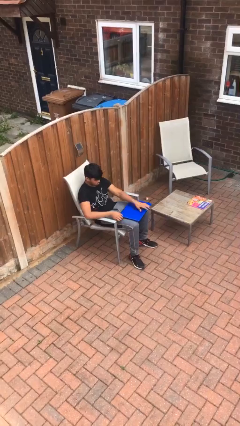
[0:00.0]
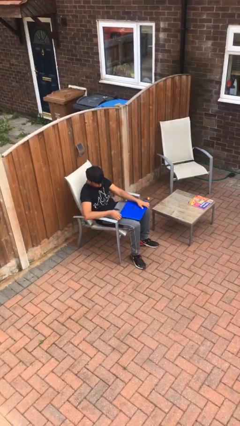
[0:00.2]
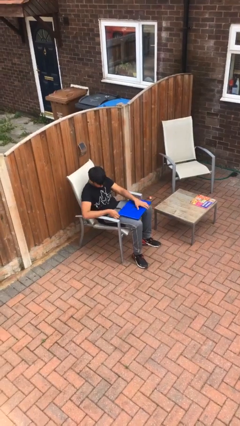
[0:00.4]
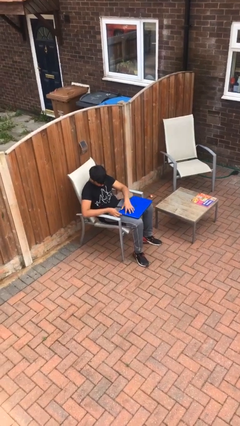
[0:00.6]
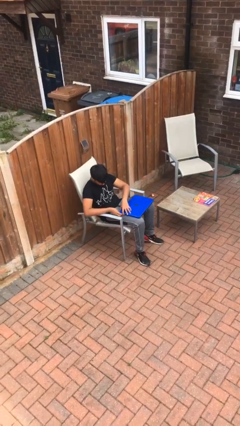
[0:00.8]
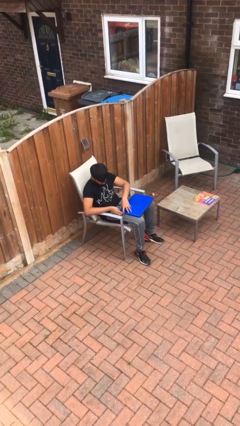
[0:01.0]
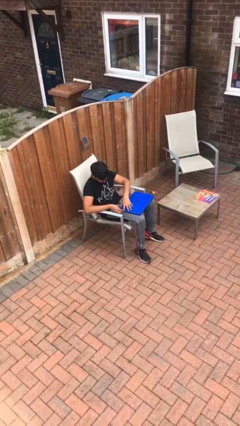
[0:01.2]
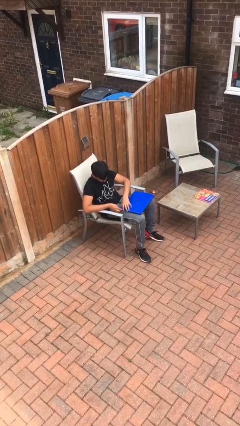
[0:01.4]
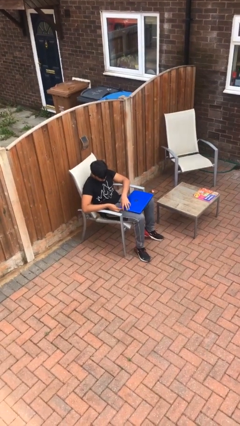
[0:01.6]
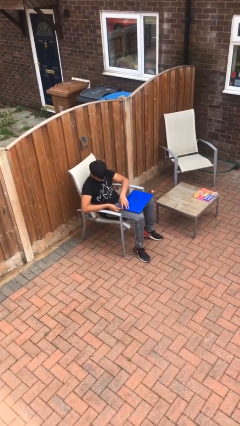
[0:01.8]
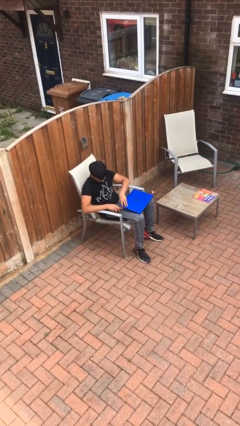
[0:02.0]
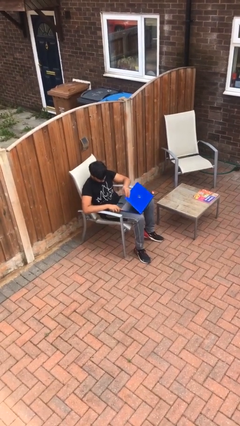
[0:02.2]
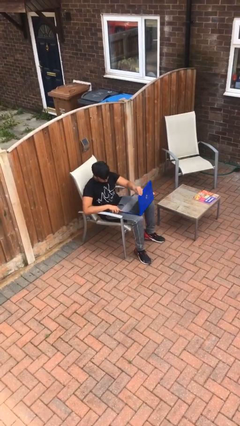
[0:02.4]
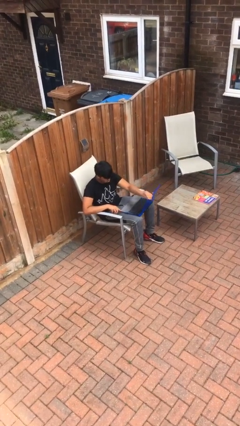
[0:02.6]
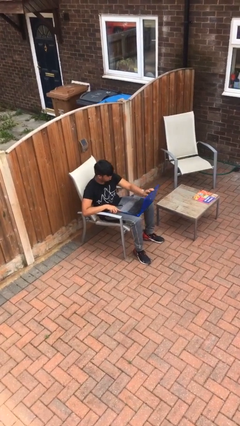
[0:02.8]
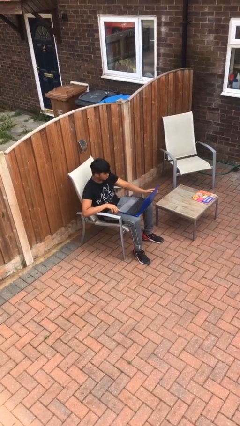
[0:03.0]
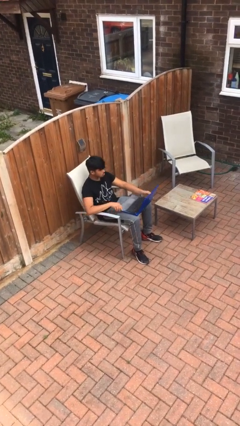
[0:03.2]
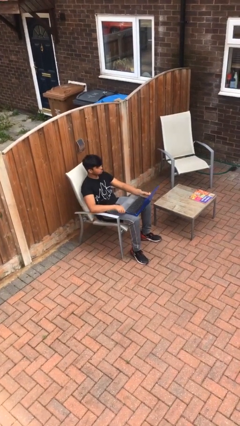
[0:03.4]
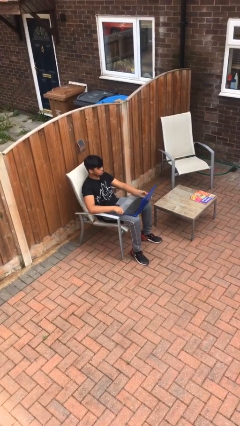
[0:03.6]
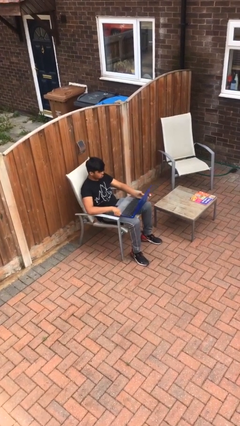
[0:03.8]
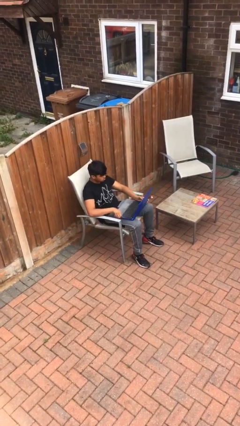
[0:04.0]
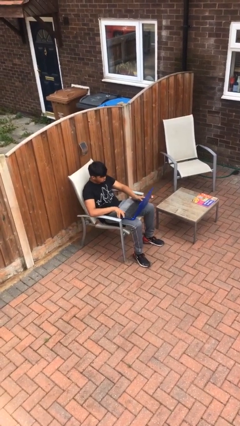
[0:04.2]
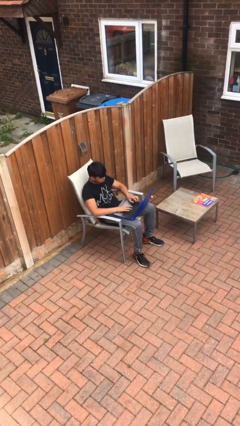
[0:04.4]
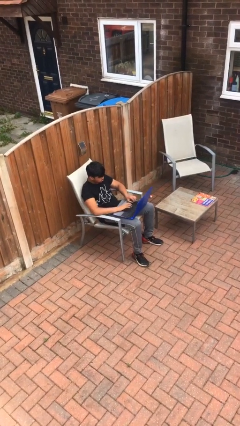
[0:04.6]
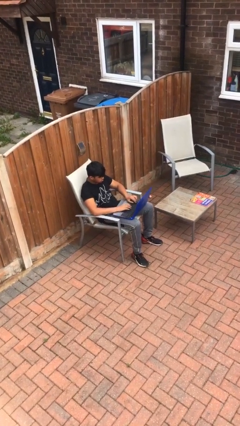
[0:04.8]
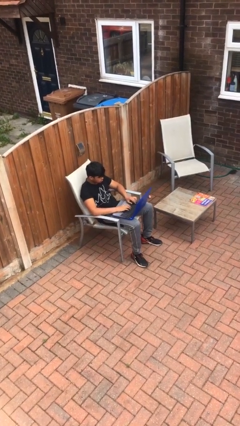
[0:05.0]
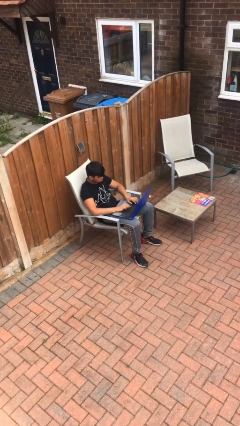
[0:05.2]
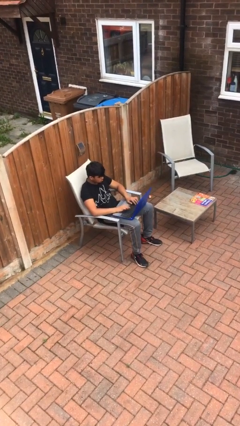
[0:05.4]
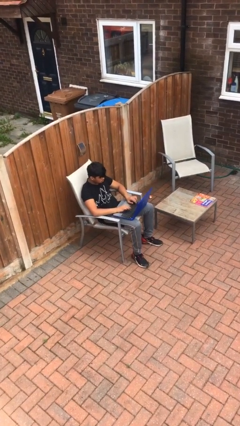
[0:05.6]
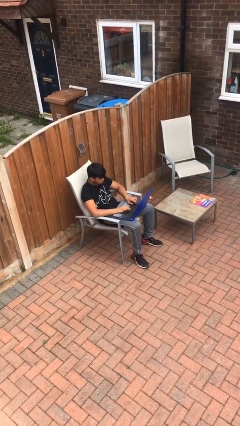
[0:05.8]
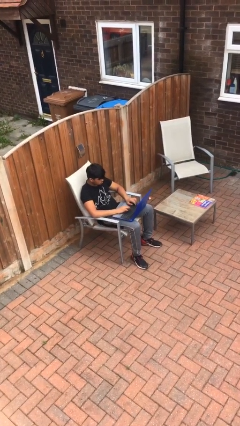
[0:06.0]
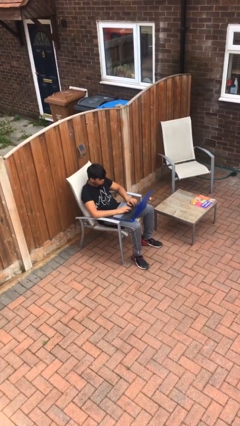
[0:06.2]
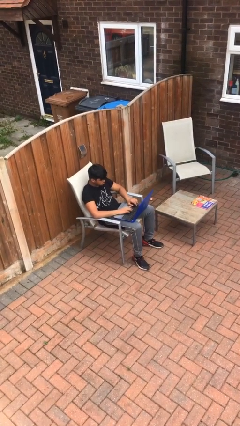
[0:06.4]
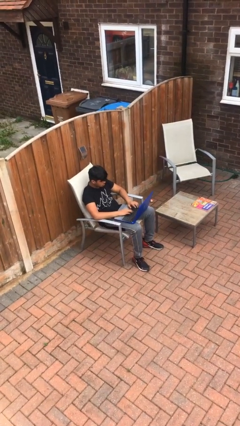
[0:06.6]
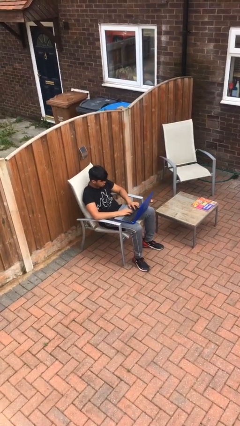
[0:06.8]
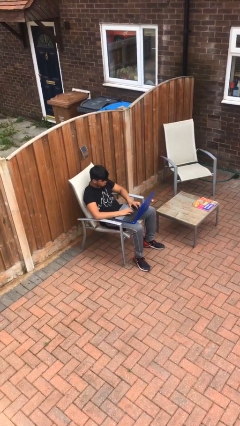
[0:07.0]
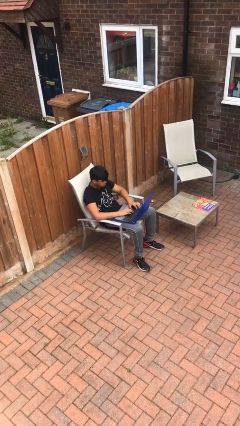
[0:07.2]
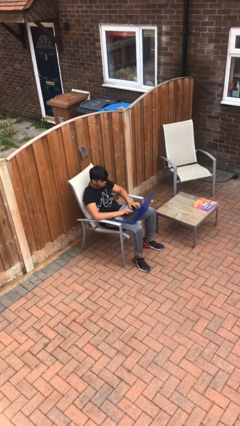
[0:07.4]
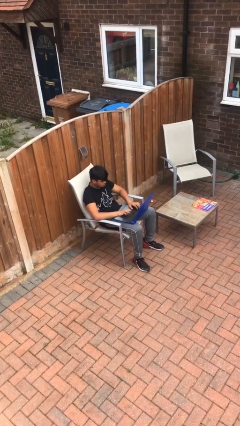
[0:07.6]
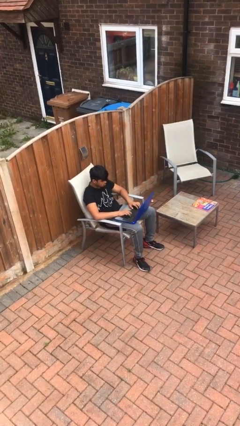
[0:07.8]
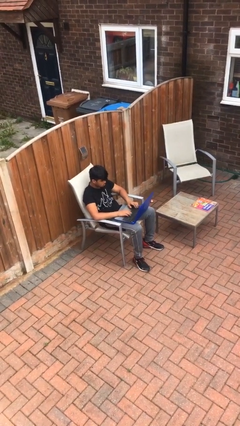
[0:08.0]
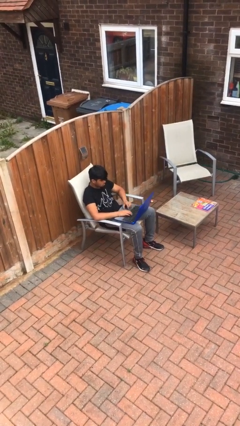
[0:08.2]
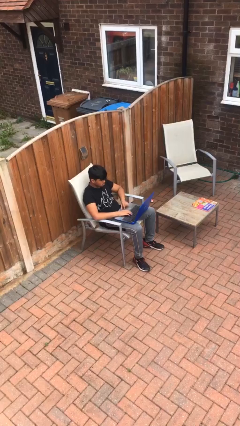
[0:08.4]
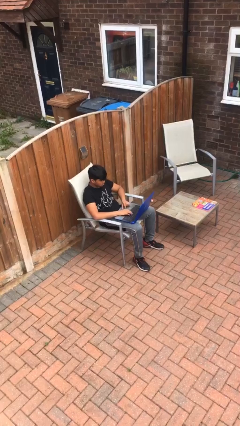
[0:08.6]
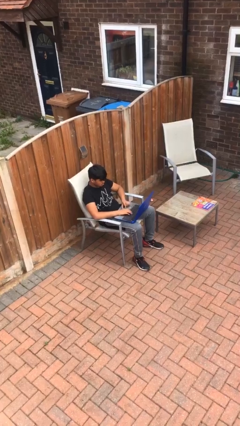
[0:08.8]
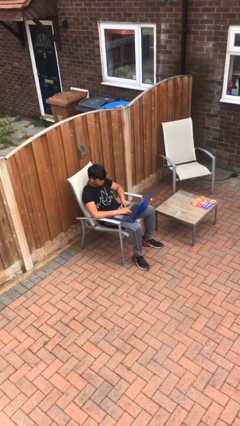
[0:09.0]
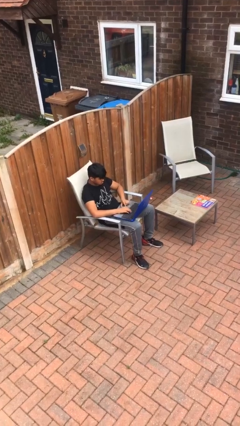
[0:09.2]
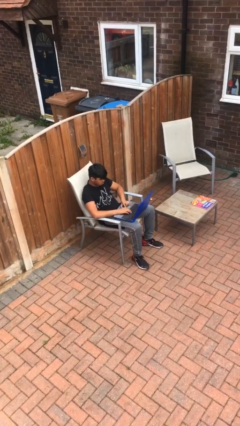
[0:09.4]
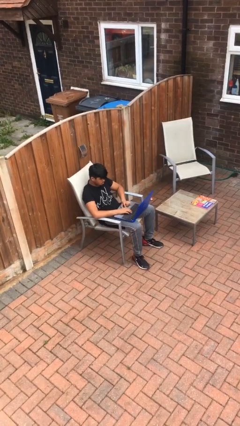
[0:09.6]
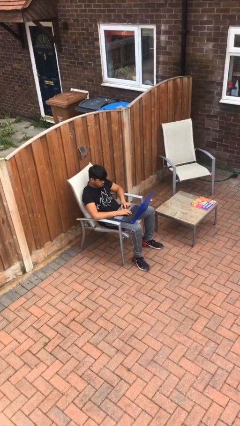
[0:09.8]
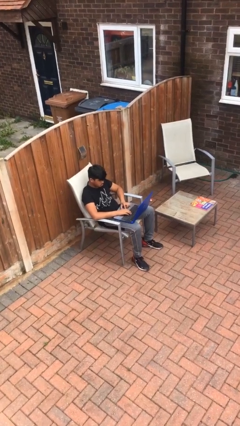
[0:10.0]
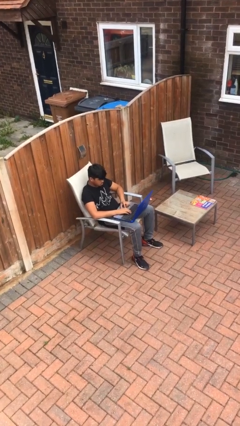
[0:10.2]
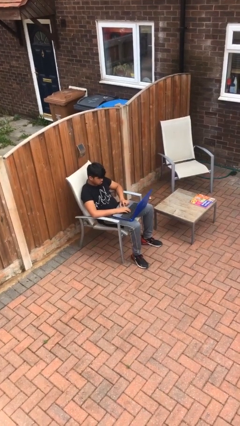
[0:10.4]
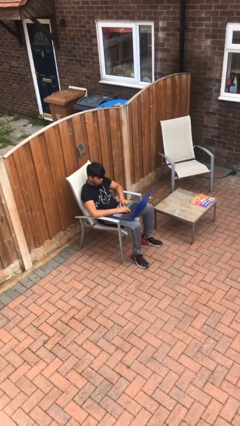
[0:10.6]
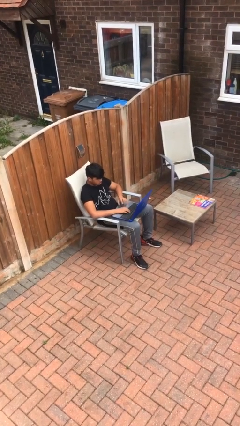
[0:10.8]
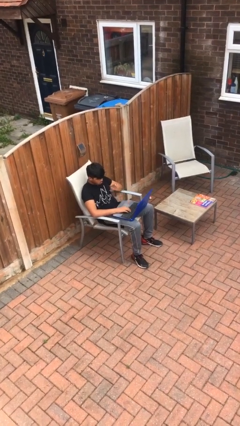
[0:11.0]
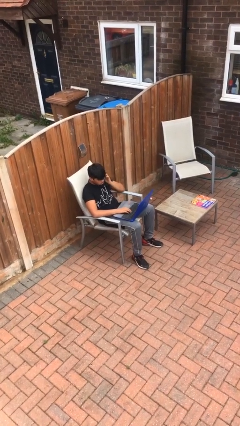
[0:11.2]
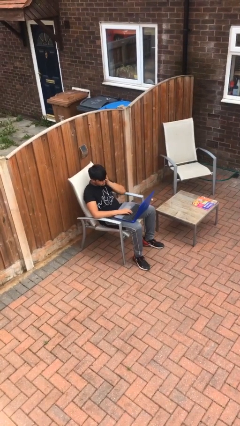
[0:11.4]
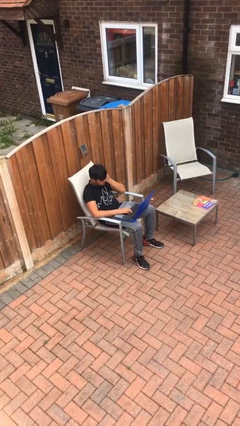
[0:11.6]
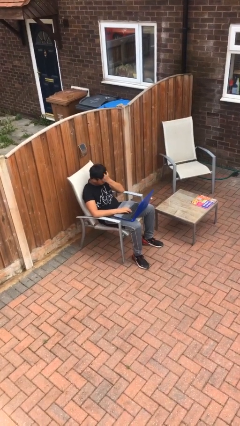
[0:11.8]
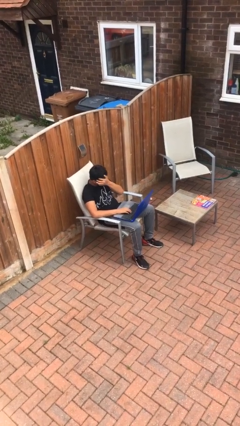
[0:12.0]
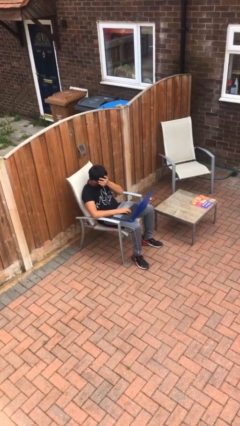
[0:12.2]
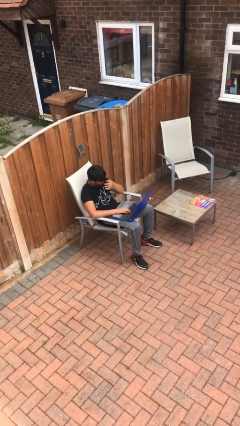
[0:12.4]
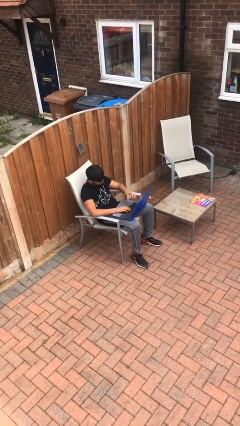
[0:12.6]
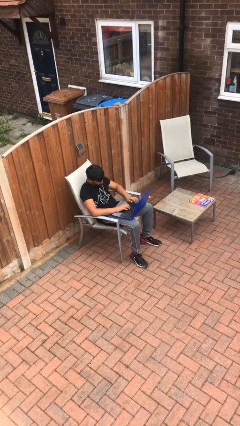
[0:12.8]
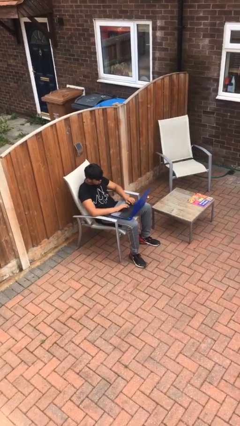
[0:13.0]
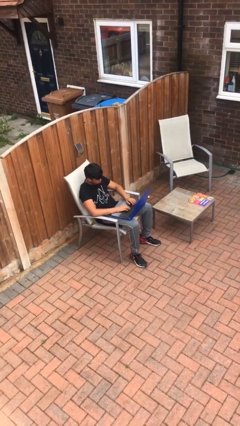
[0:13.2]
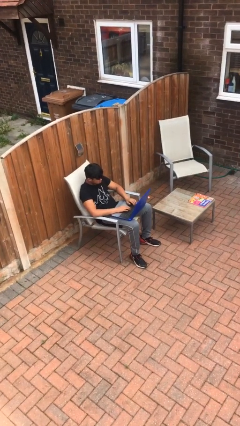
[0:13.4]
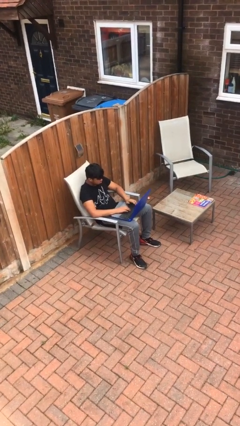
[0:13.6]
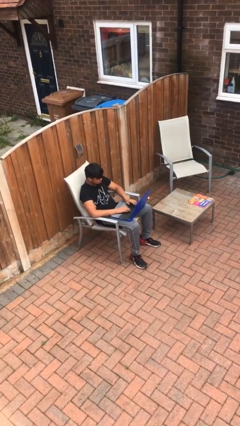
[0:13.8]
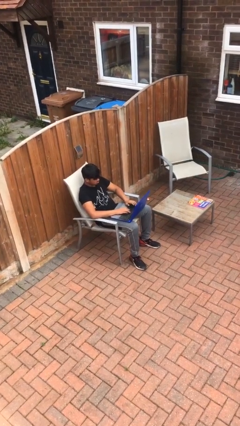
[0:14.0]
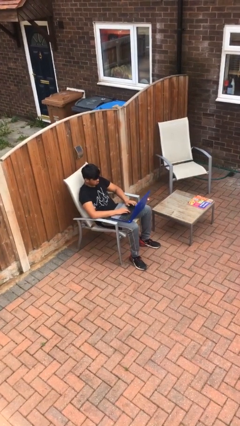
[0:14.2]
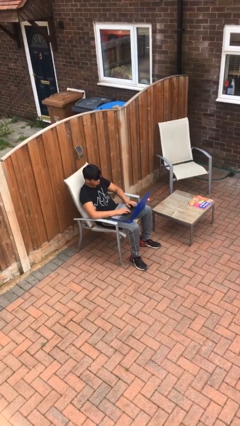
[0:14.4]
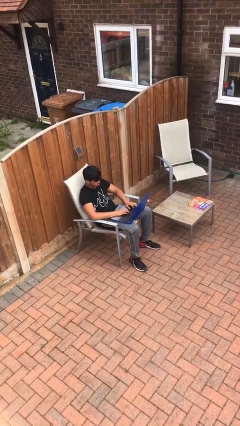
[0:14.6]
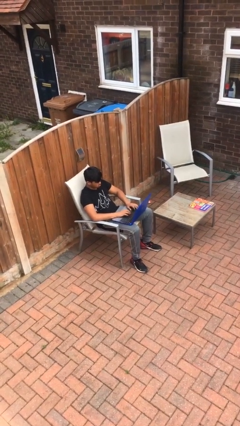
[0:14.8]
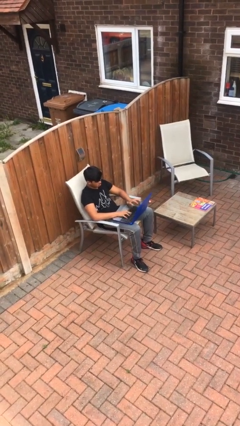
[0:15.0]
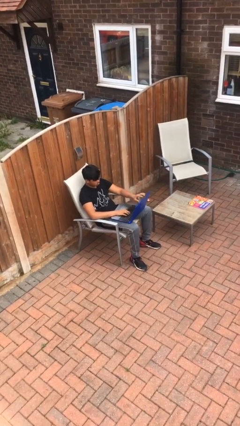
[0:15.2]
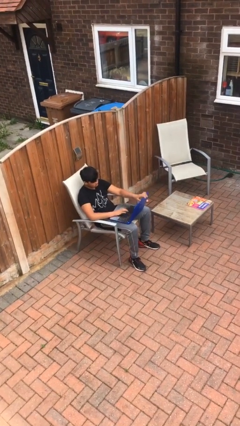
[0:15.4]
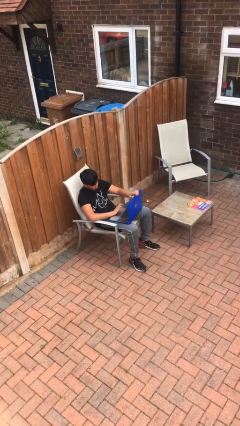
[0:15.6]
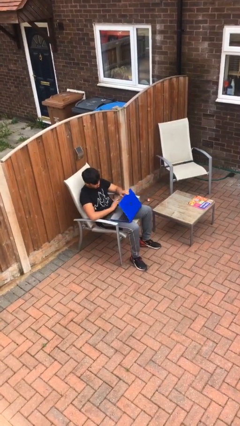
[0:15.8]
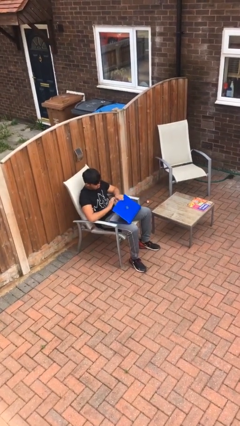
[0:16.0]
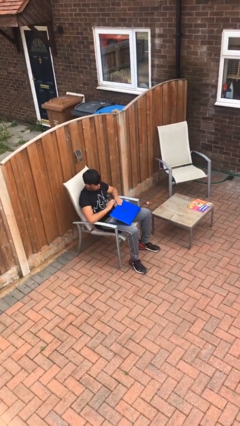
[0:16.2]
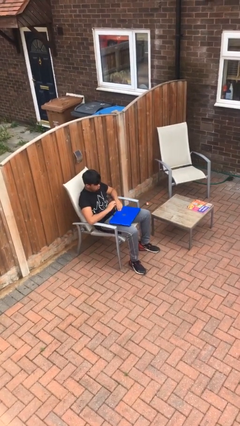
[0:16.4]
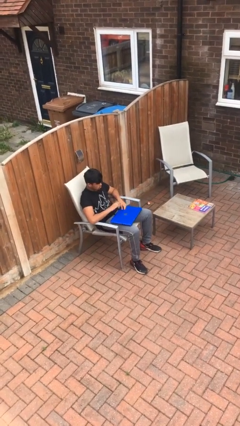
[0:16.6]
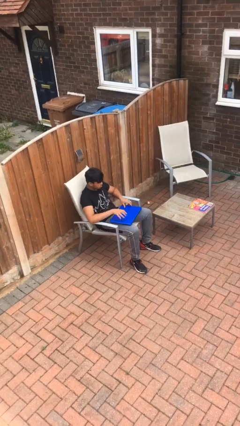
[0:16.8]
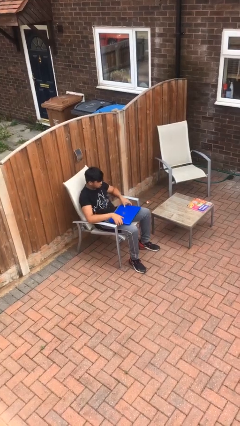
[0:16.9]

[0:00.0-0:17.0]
person interacts with laptop

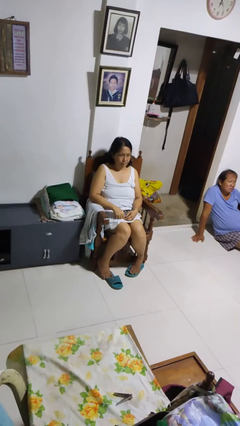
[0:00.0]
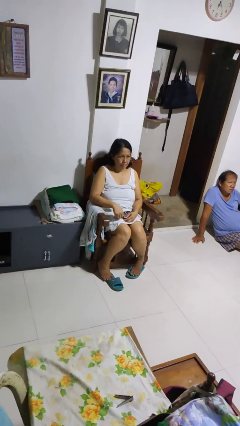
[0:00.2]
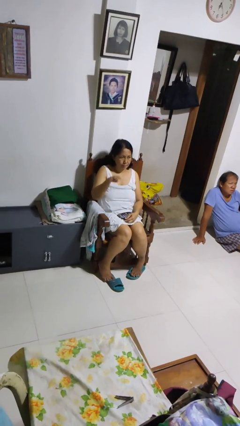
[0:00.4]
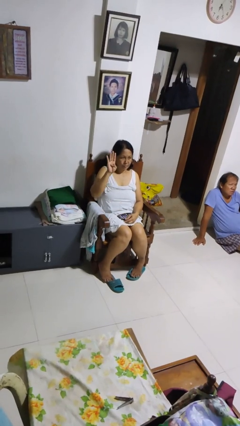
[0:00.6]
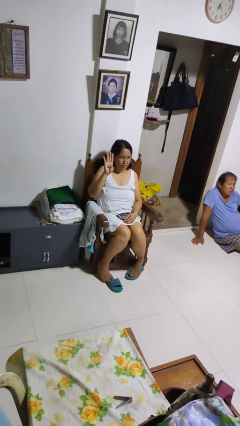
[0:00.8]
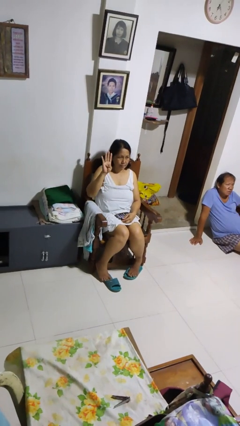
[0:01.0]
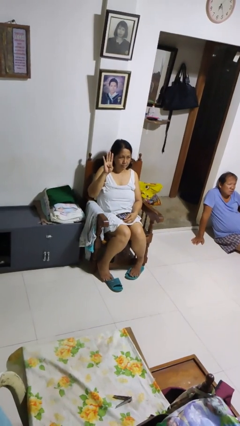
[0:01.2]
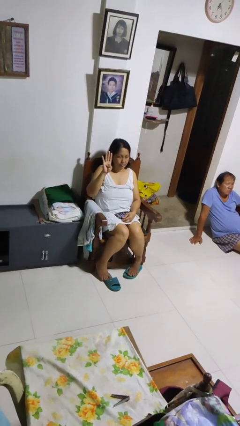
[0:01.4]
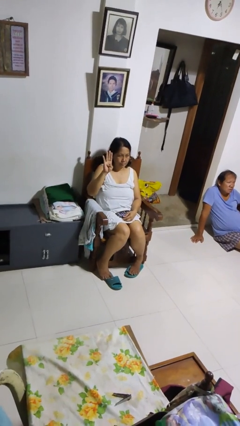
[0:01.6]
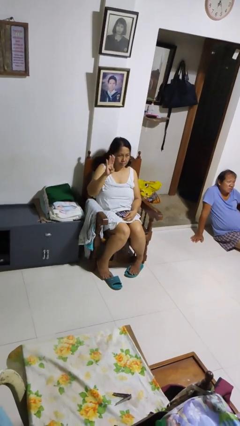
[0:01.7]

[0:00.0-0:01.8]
person gestures number four
